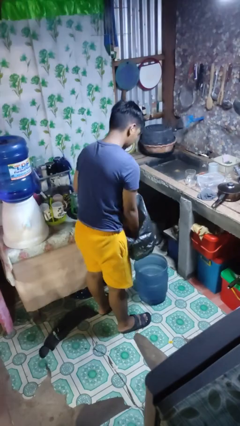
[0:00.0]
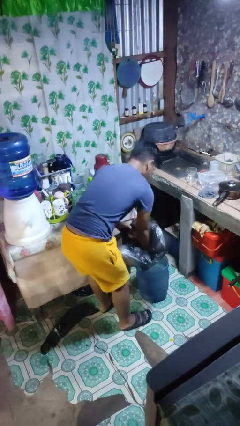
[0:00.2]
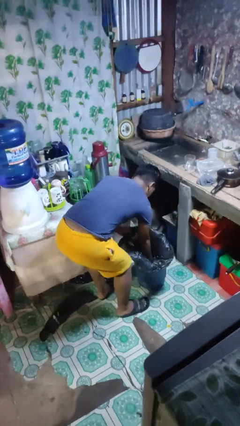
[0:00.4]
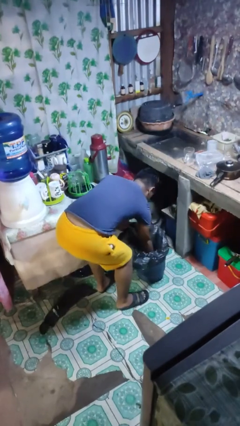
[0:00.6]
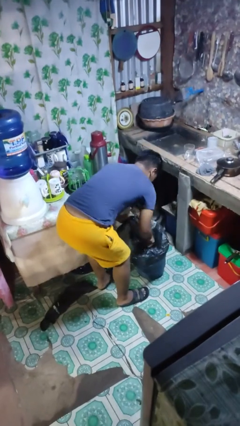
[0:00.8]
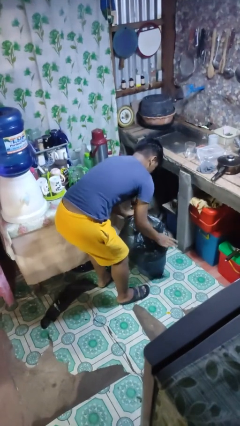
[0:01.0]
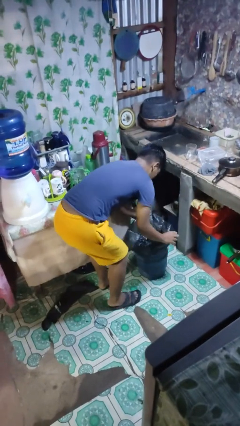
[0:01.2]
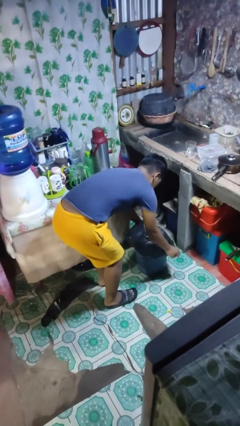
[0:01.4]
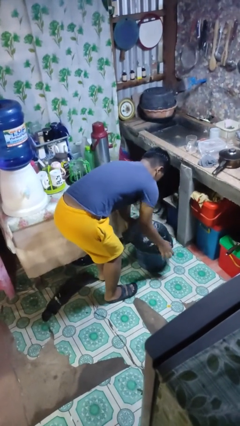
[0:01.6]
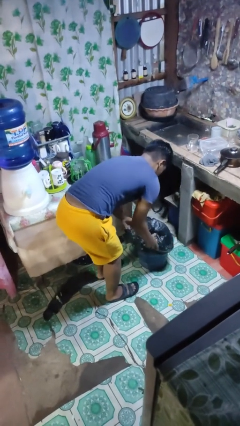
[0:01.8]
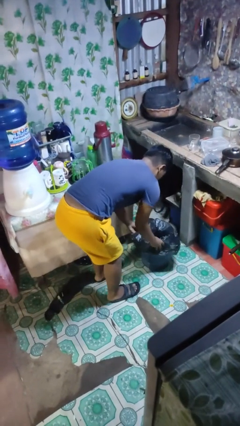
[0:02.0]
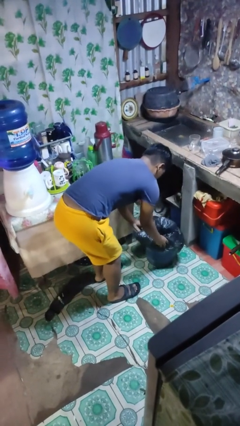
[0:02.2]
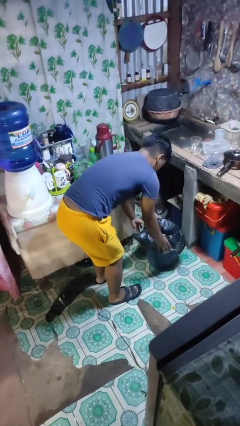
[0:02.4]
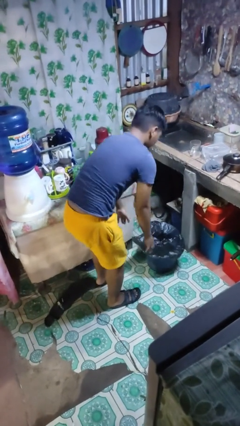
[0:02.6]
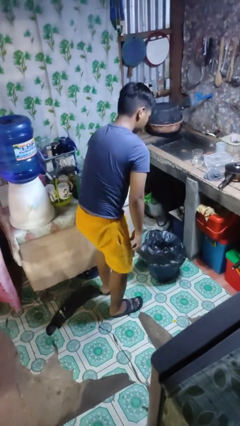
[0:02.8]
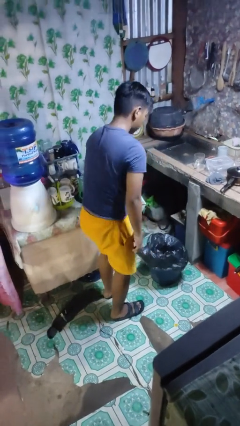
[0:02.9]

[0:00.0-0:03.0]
person inserts trashbag into trashcan

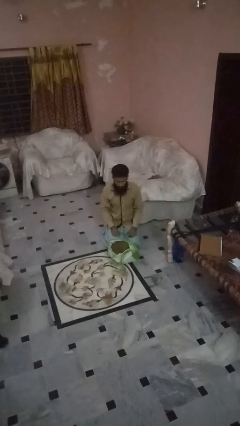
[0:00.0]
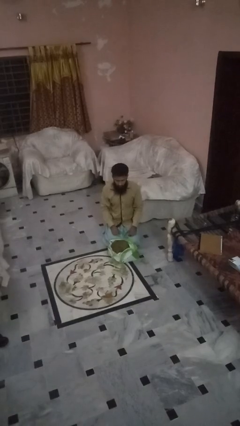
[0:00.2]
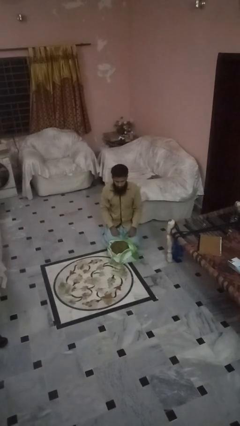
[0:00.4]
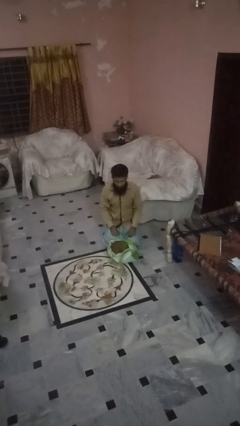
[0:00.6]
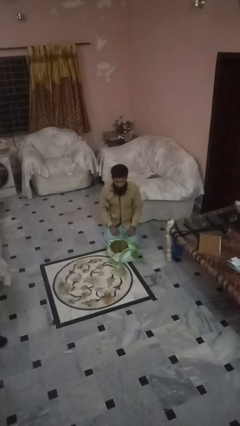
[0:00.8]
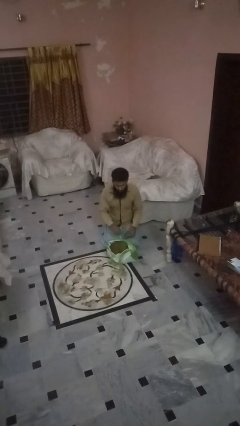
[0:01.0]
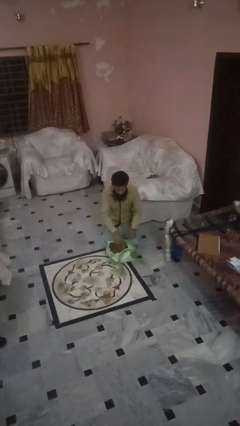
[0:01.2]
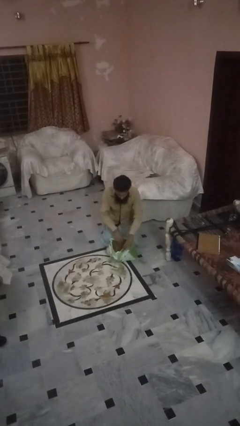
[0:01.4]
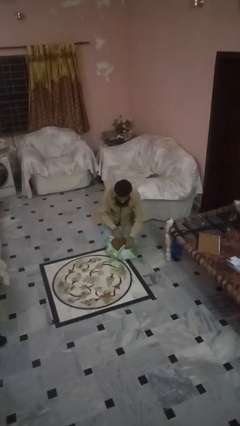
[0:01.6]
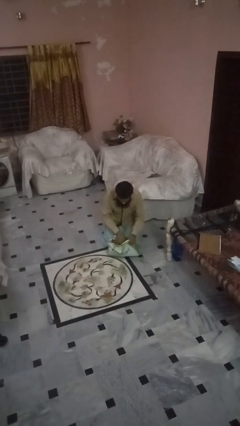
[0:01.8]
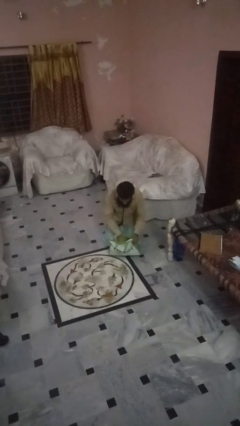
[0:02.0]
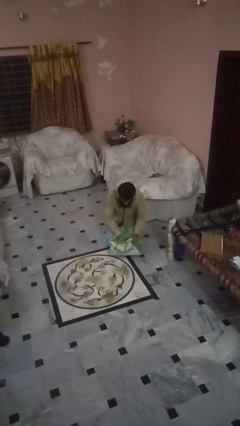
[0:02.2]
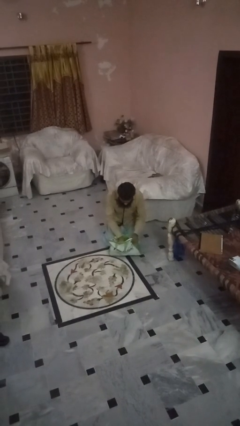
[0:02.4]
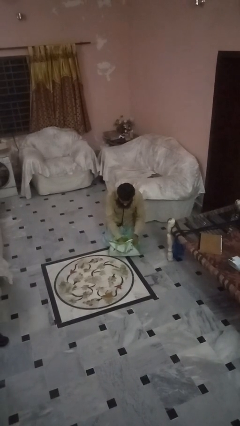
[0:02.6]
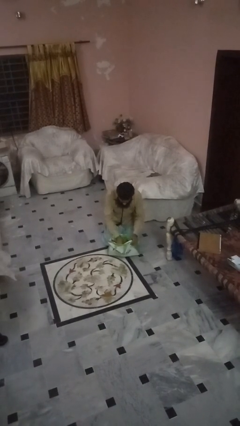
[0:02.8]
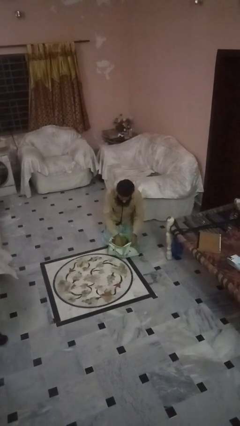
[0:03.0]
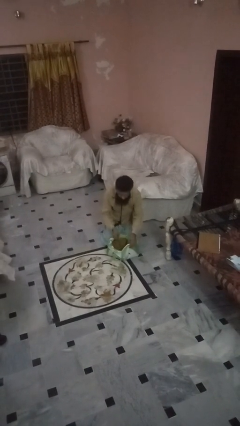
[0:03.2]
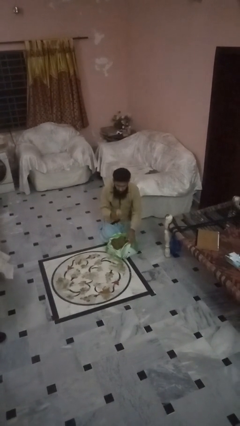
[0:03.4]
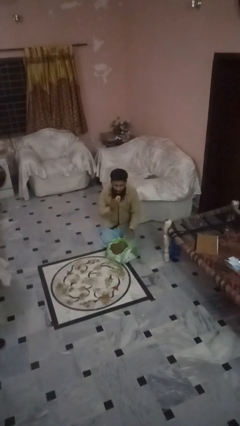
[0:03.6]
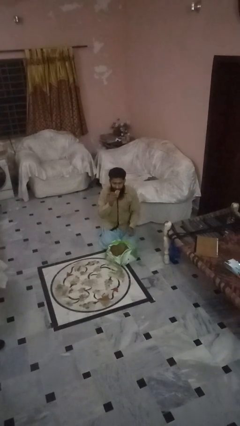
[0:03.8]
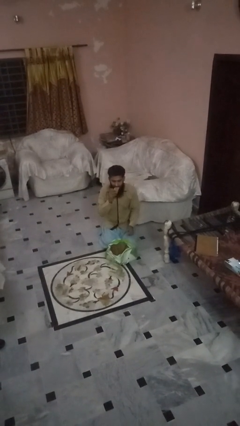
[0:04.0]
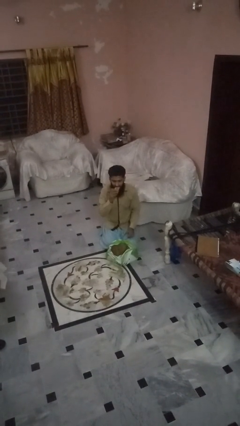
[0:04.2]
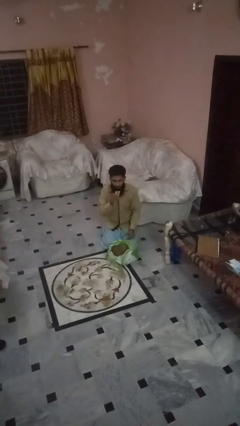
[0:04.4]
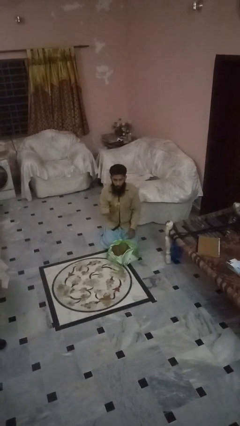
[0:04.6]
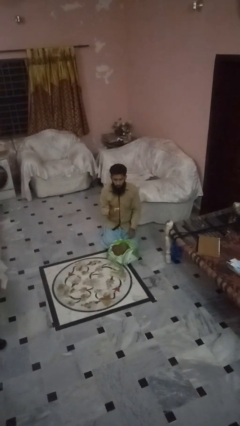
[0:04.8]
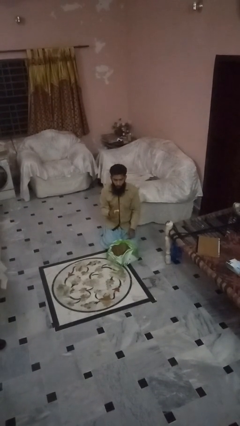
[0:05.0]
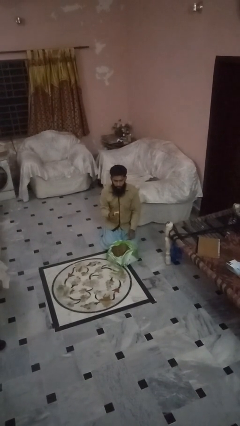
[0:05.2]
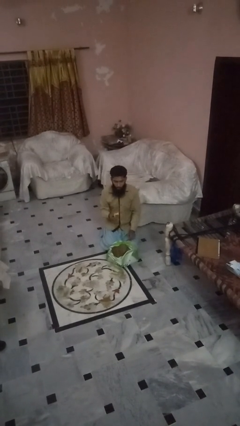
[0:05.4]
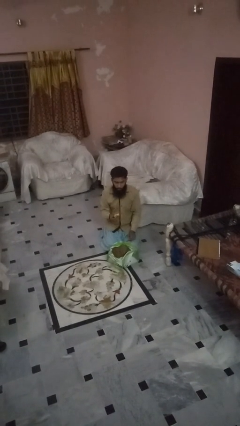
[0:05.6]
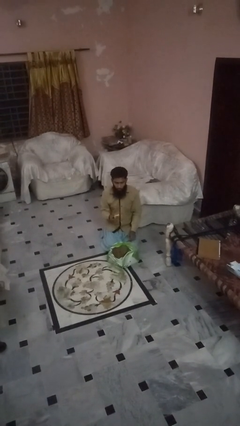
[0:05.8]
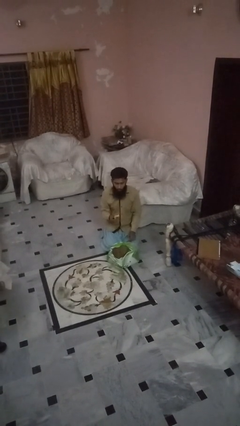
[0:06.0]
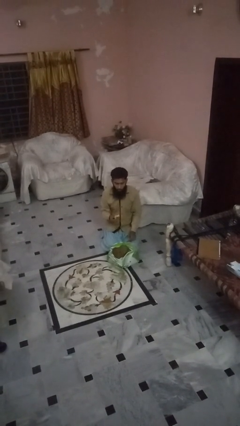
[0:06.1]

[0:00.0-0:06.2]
person eats snack from bag

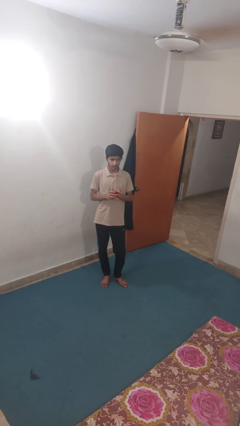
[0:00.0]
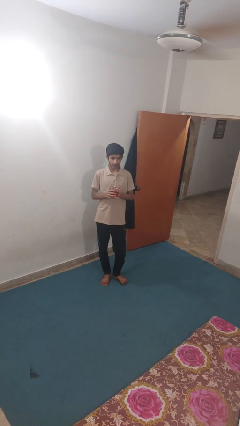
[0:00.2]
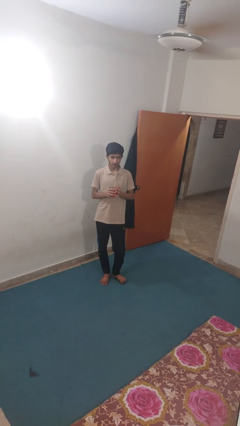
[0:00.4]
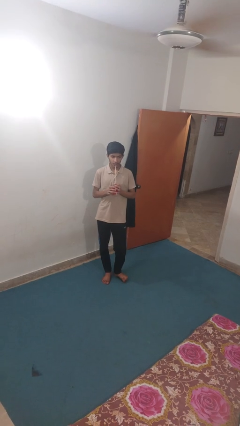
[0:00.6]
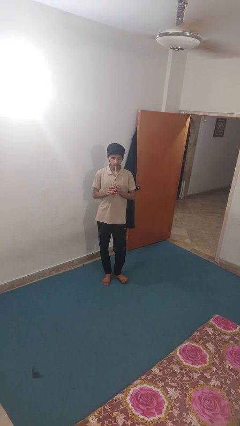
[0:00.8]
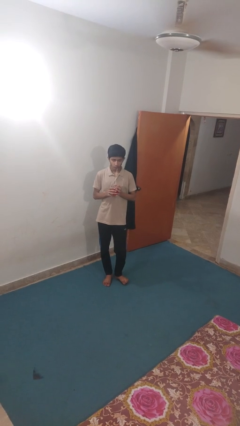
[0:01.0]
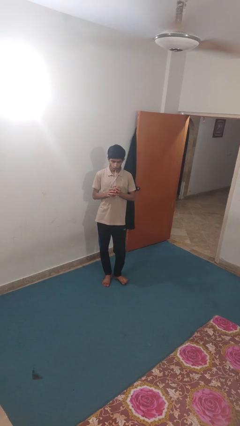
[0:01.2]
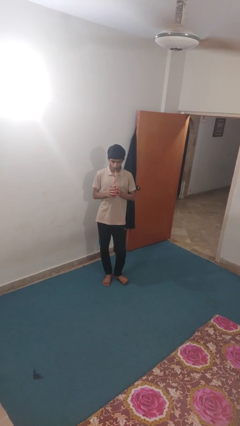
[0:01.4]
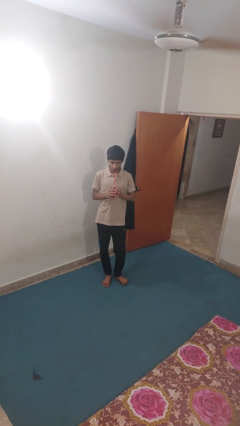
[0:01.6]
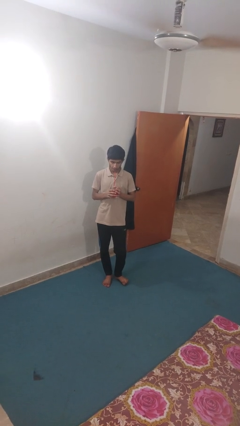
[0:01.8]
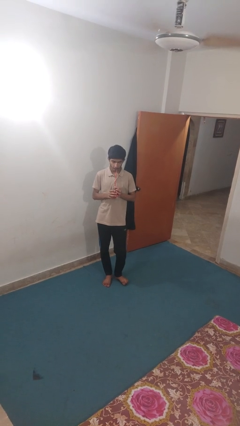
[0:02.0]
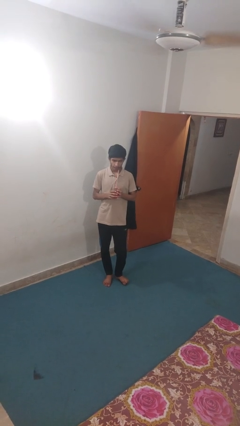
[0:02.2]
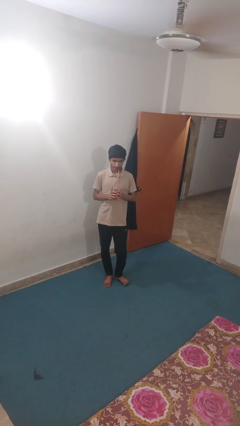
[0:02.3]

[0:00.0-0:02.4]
person drinks from straw

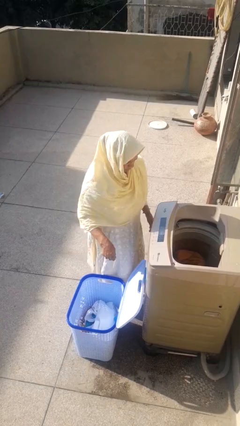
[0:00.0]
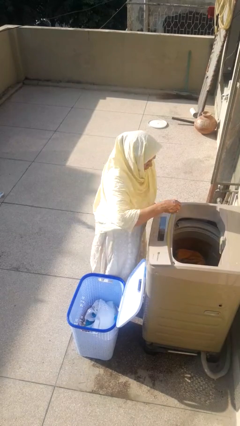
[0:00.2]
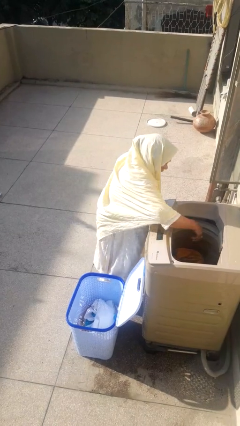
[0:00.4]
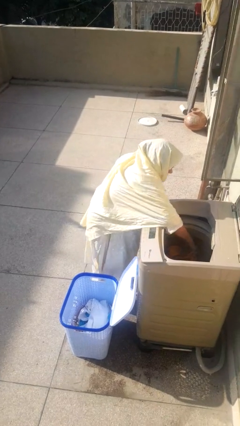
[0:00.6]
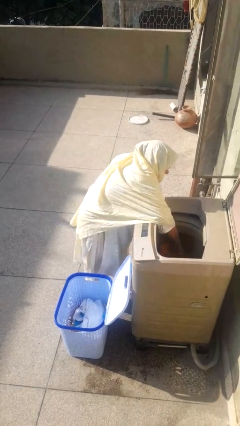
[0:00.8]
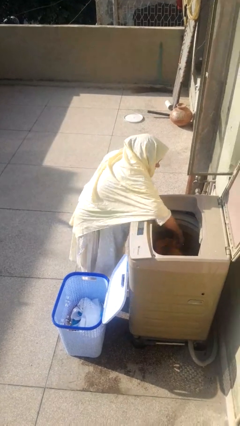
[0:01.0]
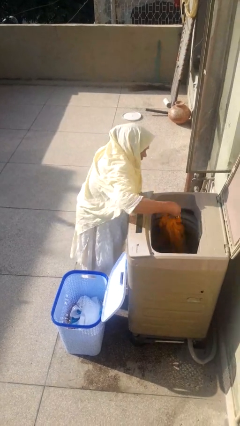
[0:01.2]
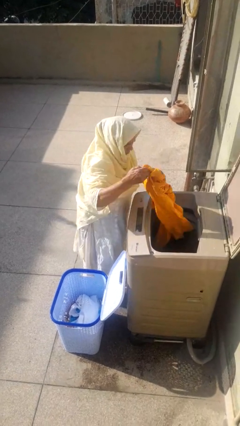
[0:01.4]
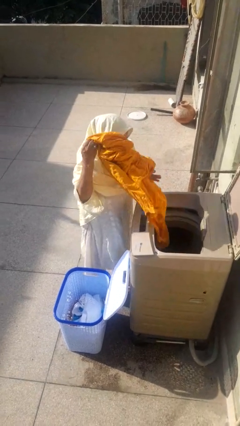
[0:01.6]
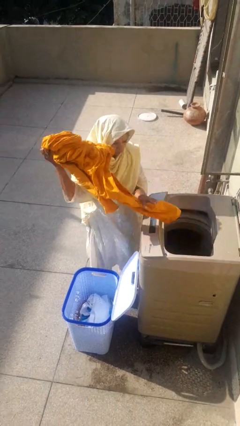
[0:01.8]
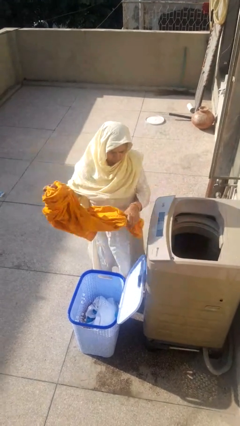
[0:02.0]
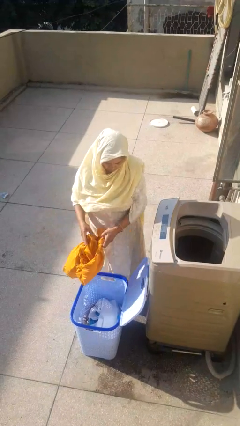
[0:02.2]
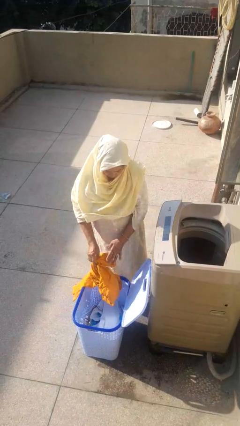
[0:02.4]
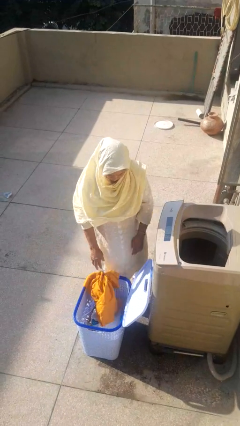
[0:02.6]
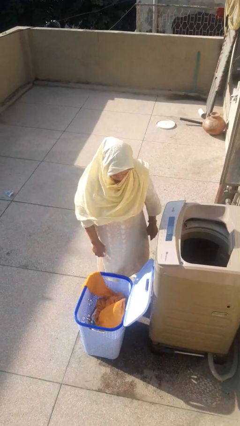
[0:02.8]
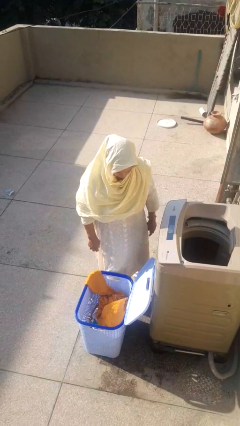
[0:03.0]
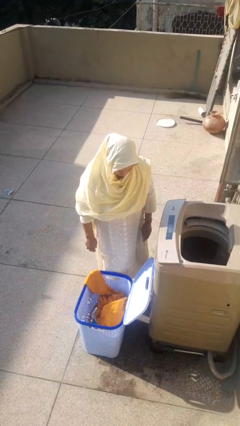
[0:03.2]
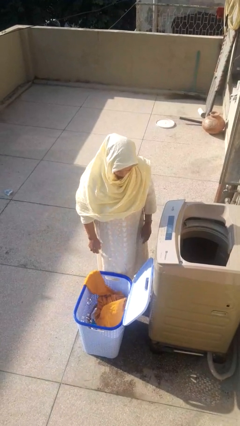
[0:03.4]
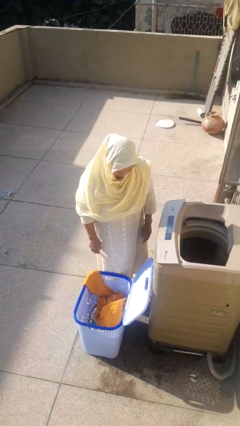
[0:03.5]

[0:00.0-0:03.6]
person unloads clotheswasher

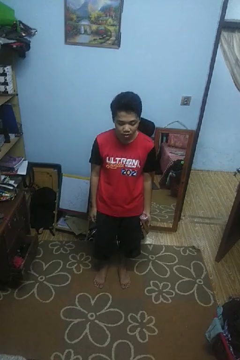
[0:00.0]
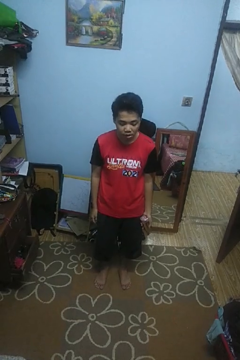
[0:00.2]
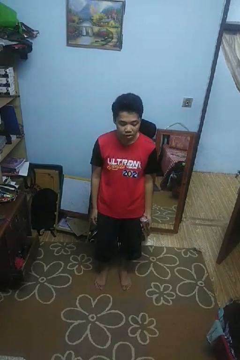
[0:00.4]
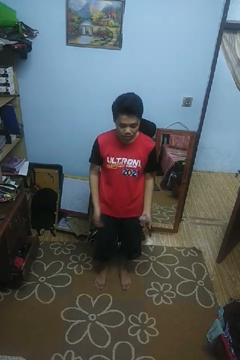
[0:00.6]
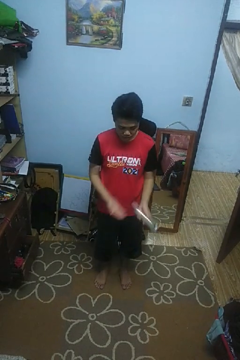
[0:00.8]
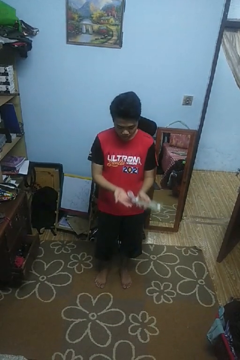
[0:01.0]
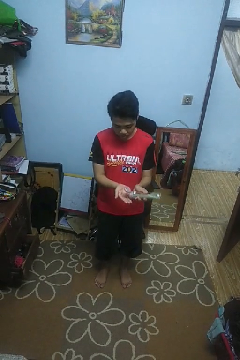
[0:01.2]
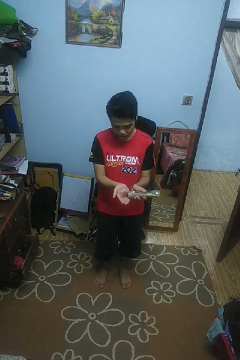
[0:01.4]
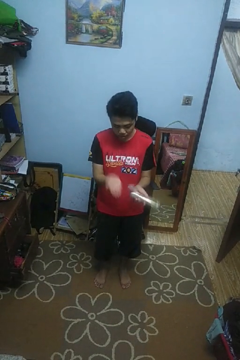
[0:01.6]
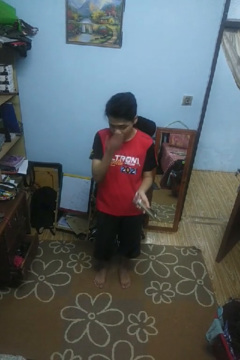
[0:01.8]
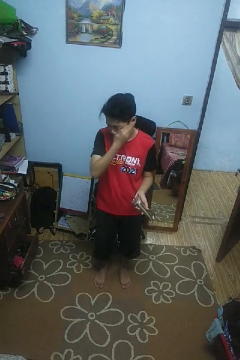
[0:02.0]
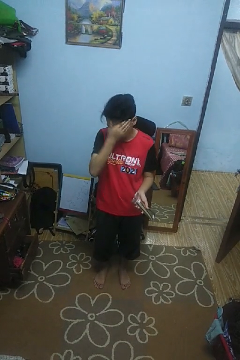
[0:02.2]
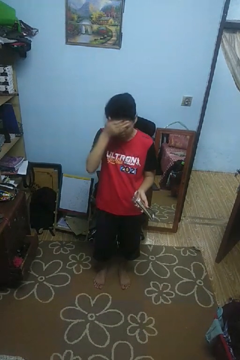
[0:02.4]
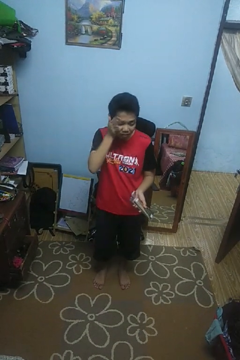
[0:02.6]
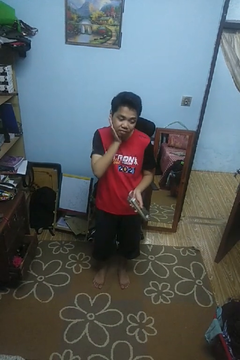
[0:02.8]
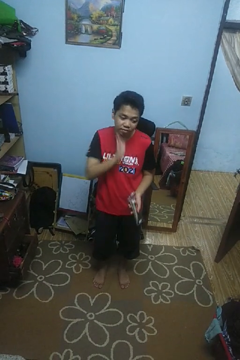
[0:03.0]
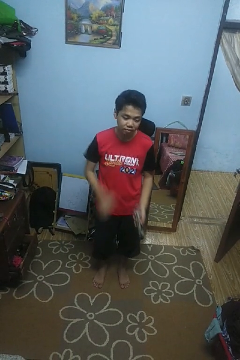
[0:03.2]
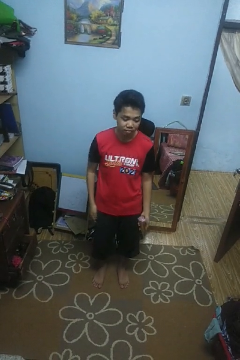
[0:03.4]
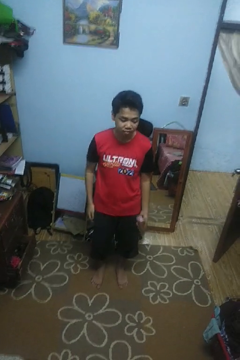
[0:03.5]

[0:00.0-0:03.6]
person applies sunscreen
